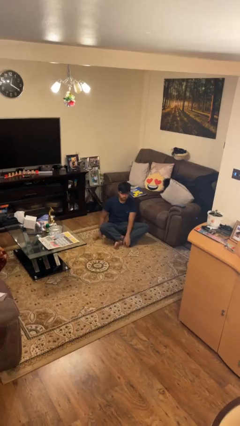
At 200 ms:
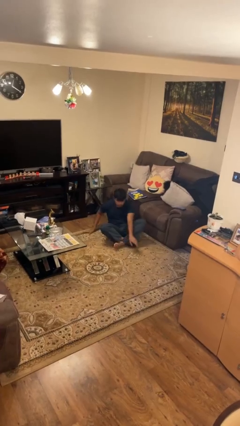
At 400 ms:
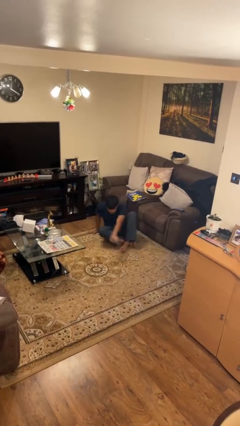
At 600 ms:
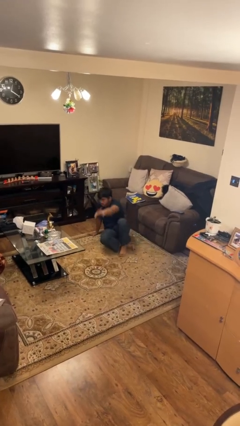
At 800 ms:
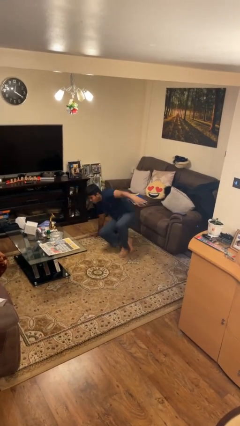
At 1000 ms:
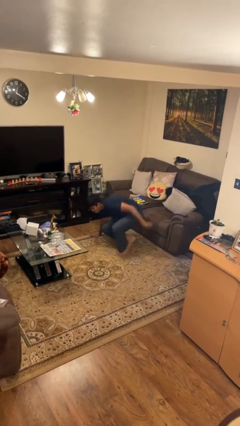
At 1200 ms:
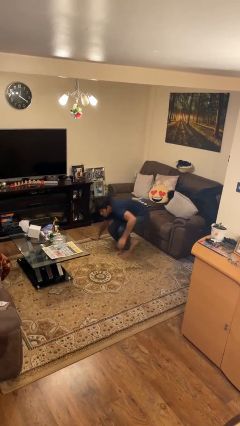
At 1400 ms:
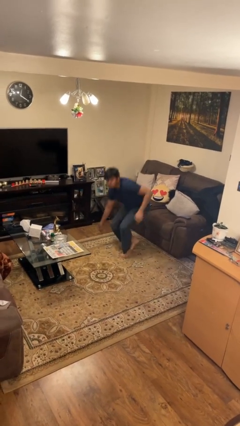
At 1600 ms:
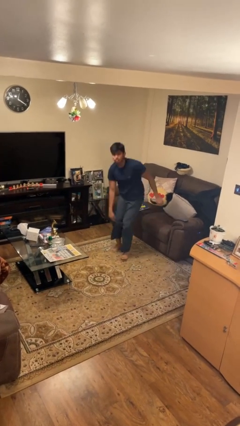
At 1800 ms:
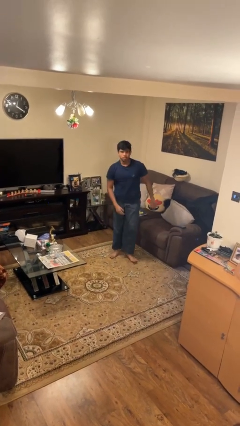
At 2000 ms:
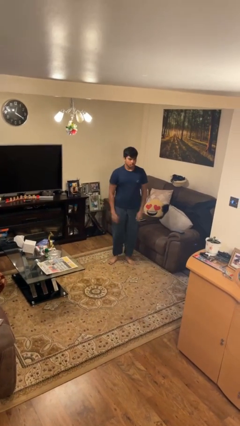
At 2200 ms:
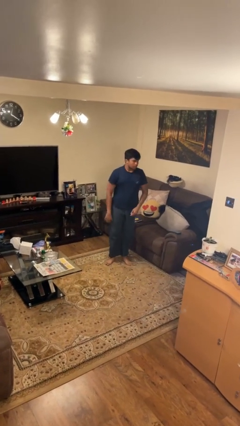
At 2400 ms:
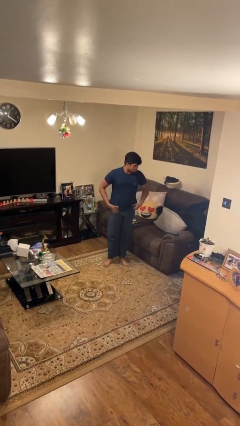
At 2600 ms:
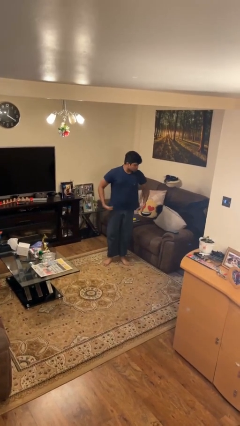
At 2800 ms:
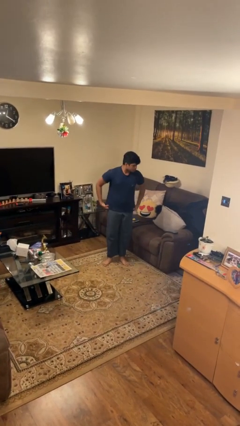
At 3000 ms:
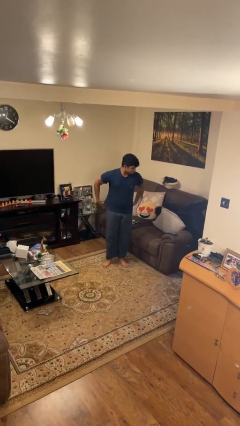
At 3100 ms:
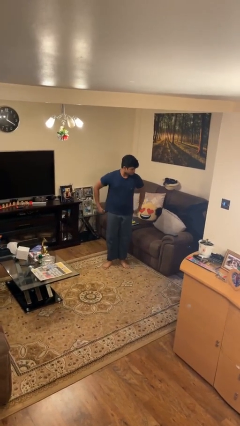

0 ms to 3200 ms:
person stands up from floor

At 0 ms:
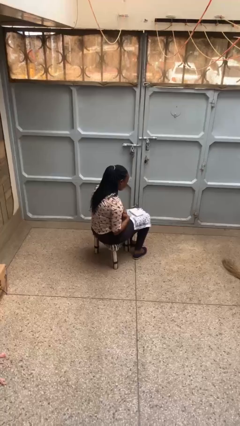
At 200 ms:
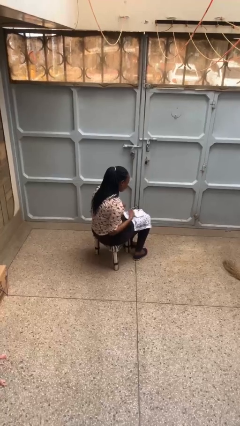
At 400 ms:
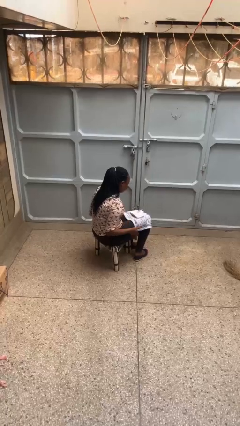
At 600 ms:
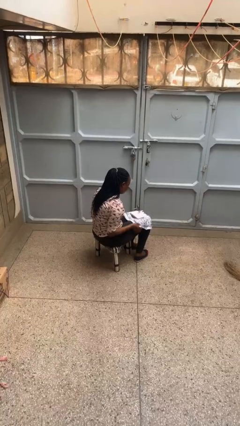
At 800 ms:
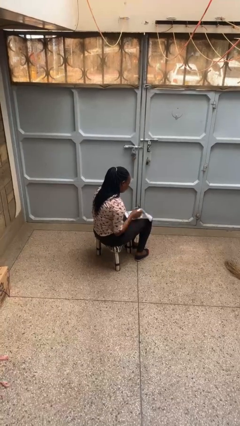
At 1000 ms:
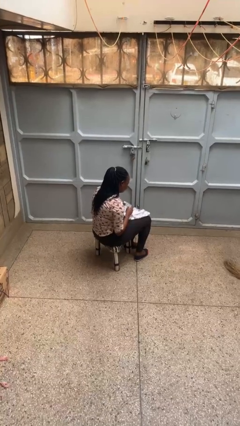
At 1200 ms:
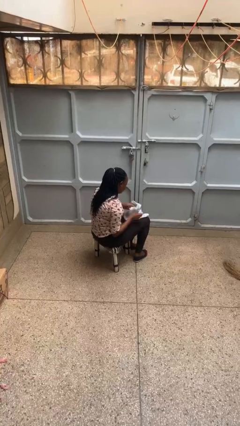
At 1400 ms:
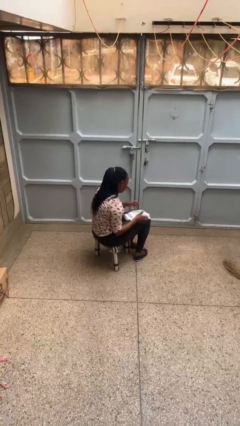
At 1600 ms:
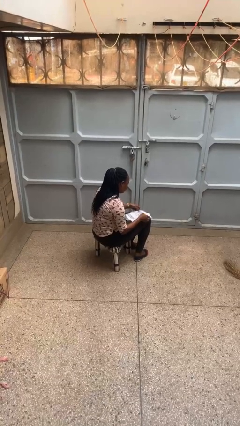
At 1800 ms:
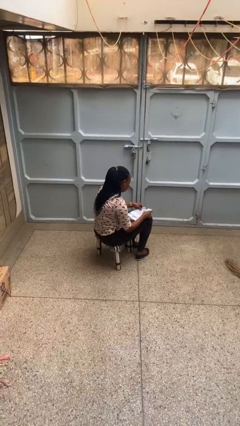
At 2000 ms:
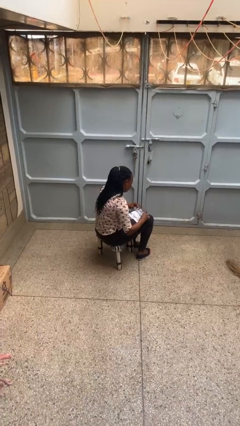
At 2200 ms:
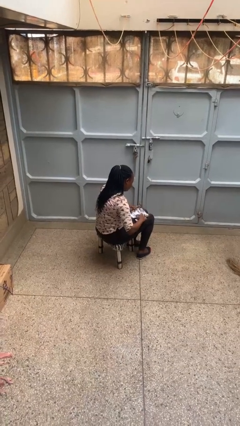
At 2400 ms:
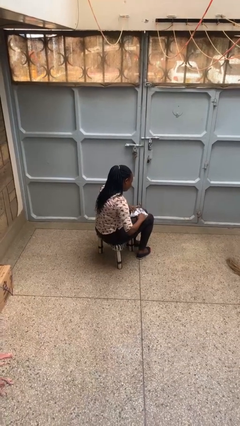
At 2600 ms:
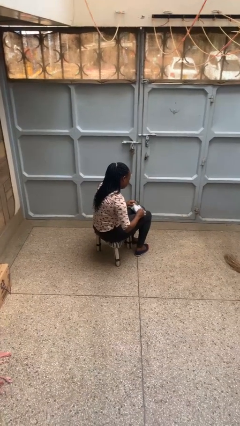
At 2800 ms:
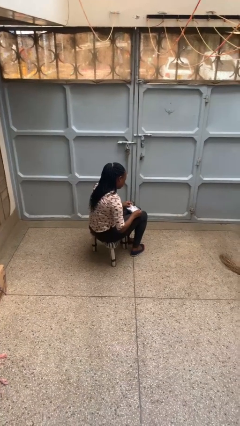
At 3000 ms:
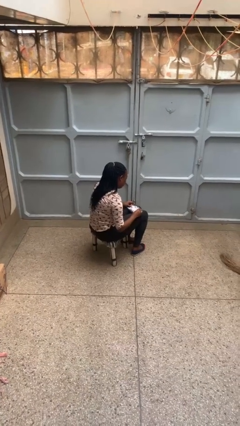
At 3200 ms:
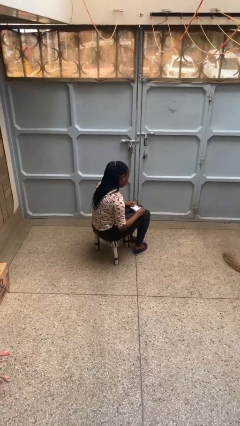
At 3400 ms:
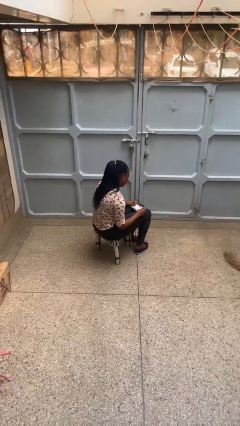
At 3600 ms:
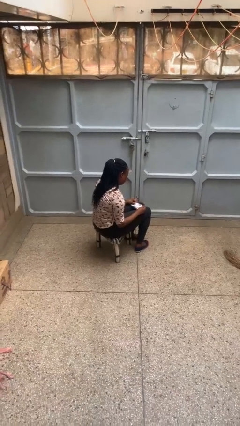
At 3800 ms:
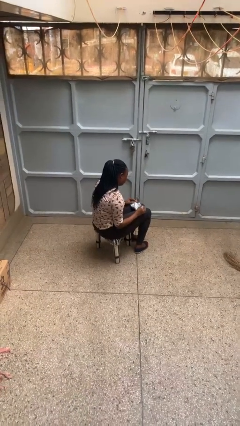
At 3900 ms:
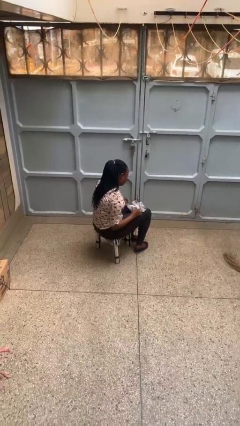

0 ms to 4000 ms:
person wraps box

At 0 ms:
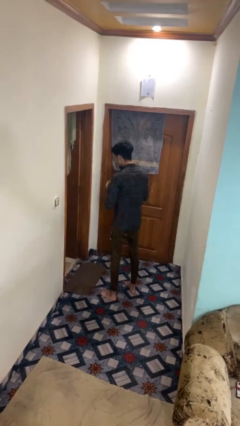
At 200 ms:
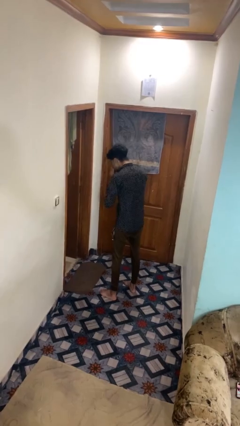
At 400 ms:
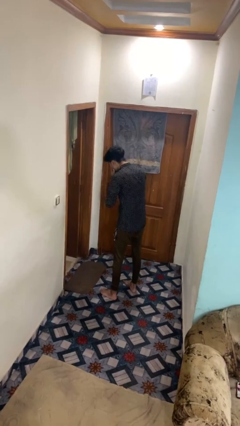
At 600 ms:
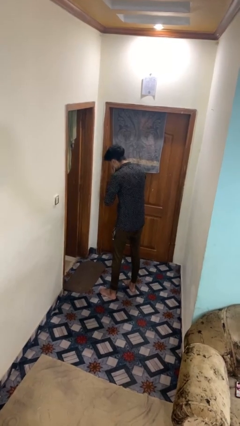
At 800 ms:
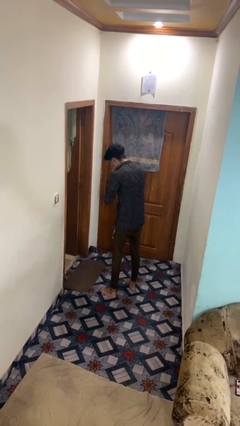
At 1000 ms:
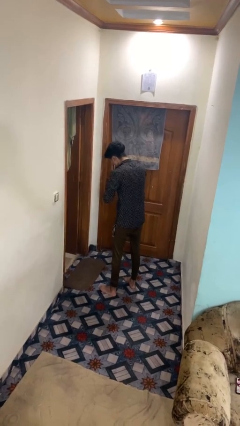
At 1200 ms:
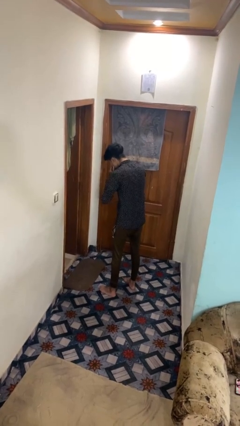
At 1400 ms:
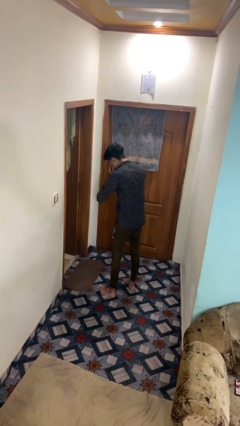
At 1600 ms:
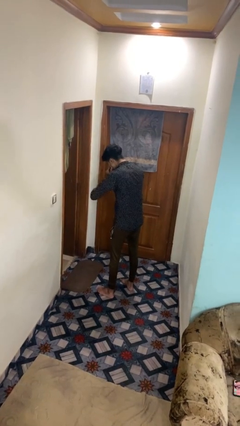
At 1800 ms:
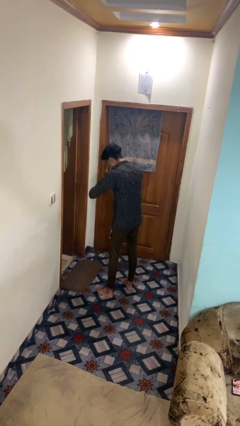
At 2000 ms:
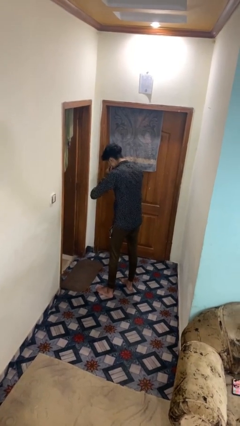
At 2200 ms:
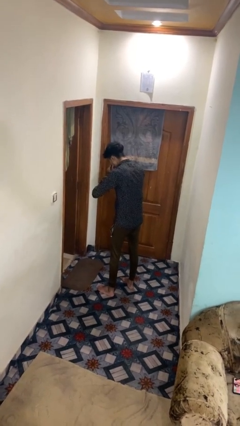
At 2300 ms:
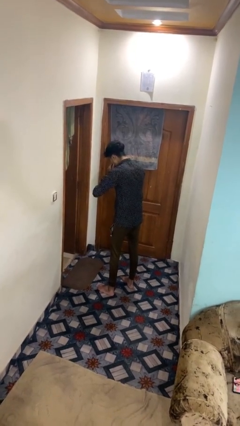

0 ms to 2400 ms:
person sneezes into hand

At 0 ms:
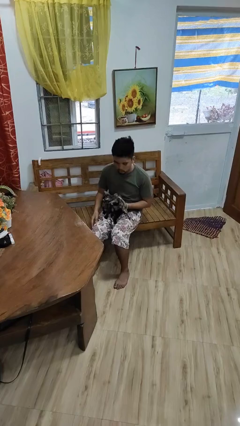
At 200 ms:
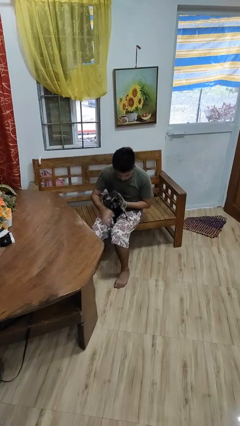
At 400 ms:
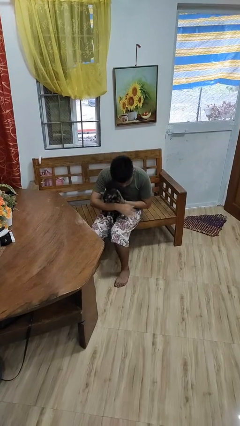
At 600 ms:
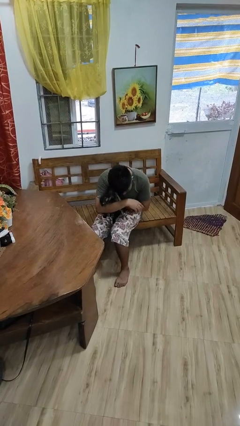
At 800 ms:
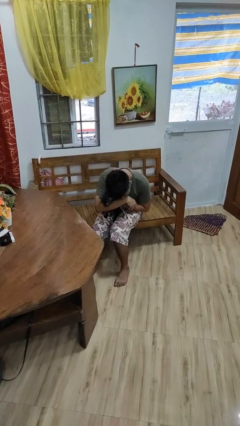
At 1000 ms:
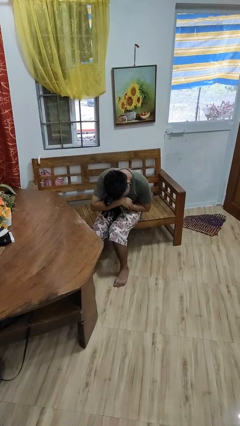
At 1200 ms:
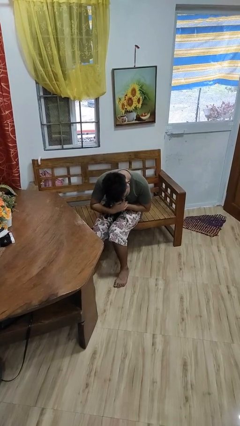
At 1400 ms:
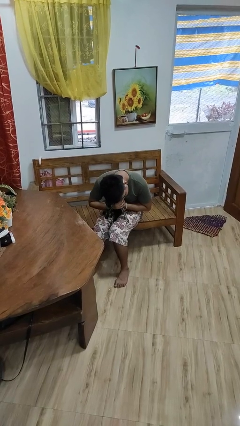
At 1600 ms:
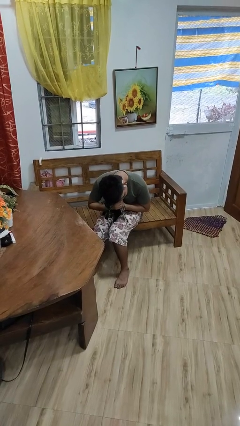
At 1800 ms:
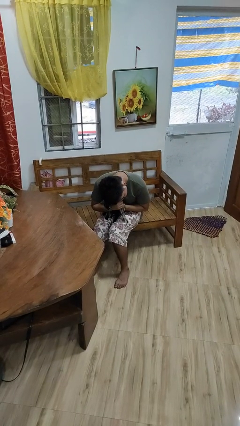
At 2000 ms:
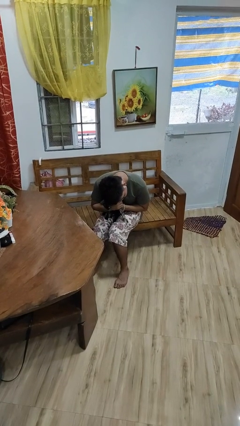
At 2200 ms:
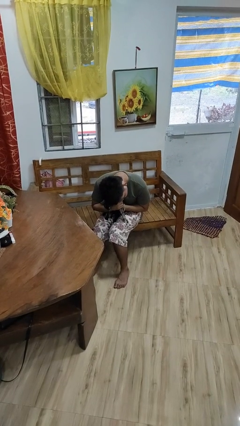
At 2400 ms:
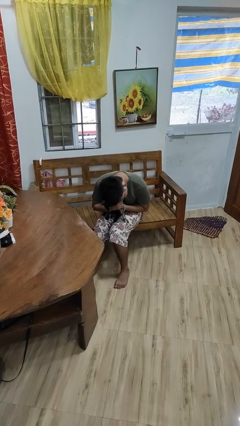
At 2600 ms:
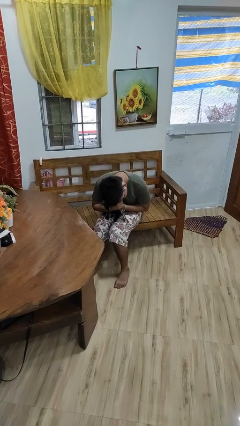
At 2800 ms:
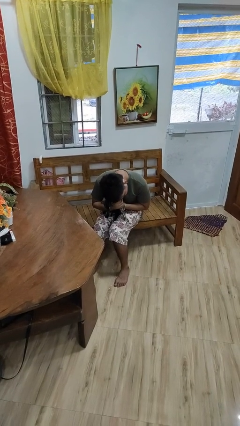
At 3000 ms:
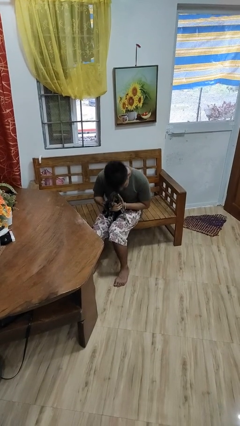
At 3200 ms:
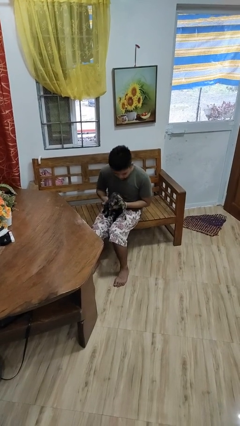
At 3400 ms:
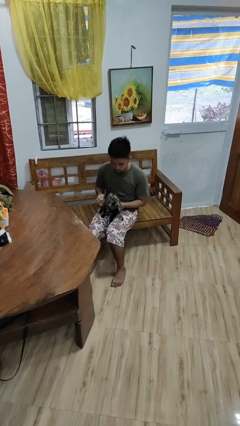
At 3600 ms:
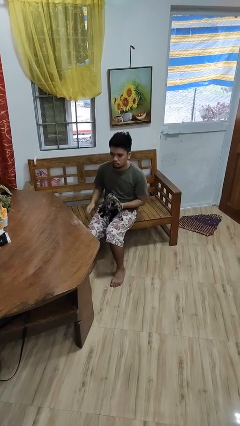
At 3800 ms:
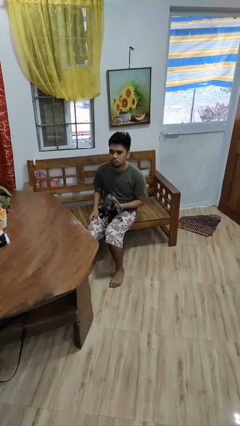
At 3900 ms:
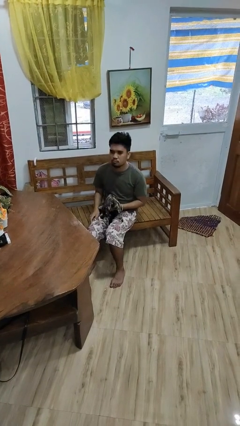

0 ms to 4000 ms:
person hugs cat

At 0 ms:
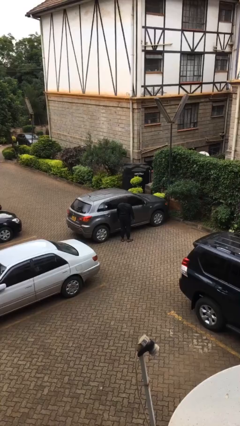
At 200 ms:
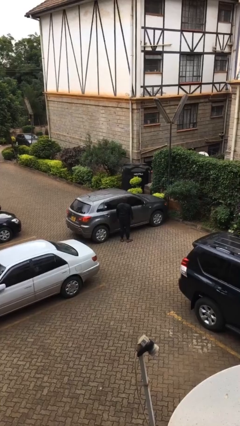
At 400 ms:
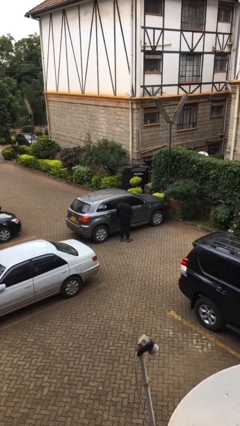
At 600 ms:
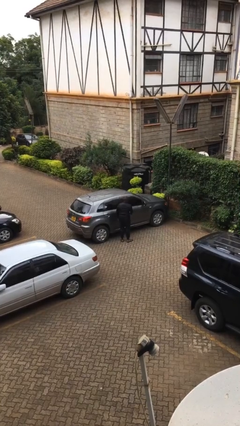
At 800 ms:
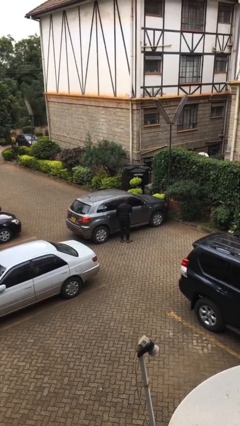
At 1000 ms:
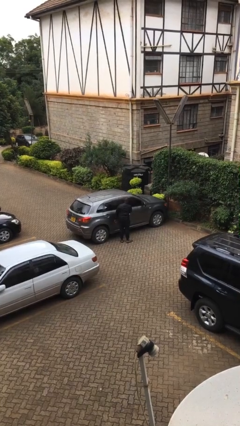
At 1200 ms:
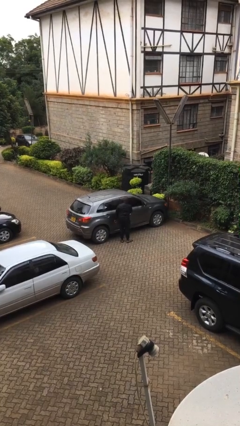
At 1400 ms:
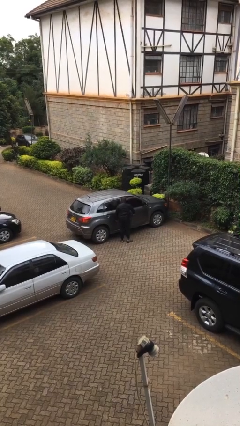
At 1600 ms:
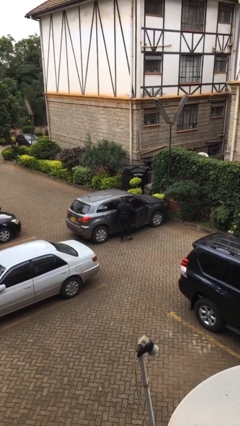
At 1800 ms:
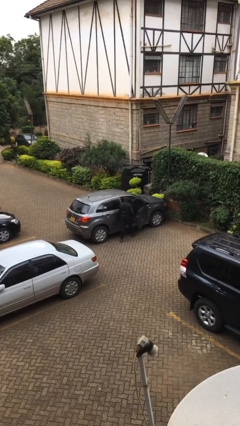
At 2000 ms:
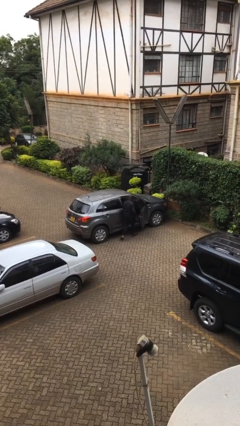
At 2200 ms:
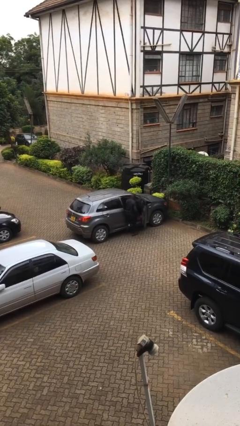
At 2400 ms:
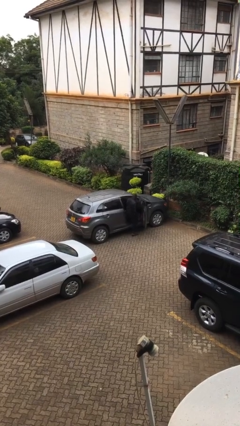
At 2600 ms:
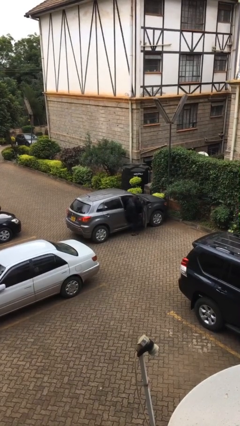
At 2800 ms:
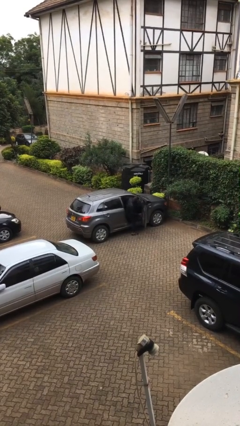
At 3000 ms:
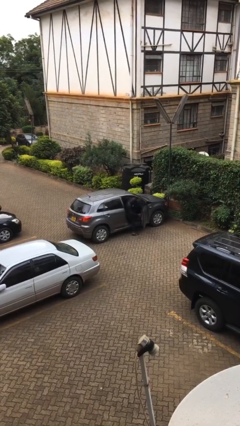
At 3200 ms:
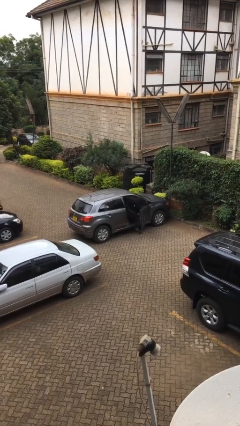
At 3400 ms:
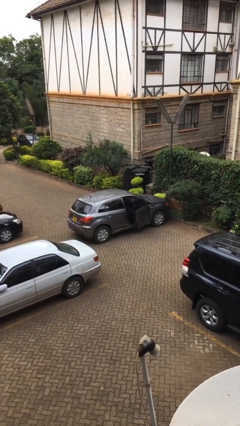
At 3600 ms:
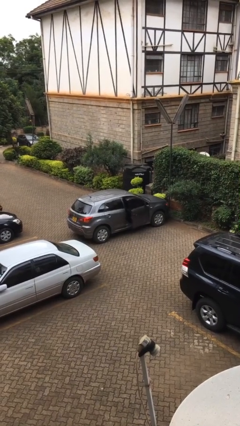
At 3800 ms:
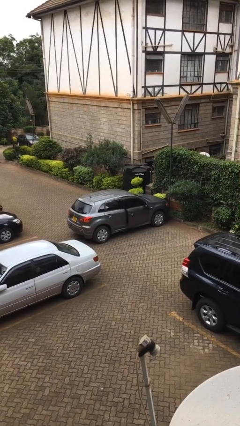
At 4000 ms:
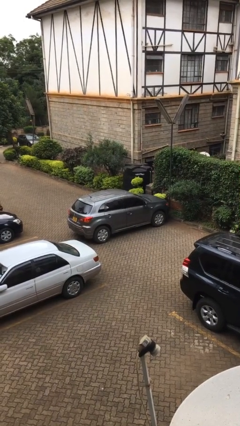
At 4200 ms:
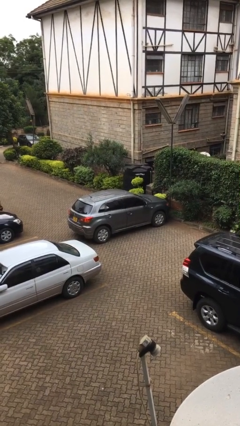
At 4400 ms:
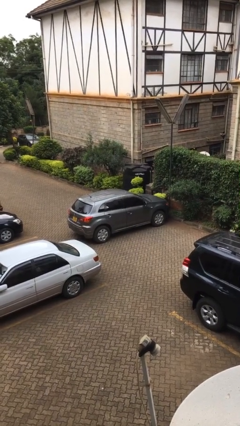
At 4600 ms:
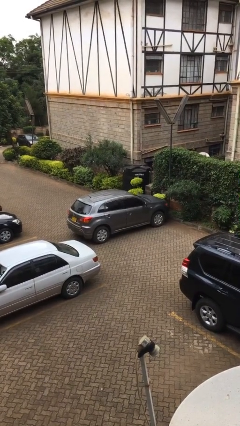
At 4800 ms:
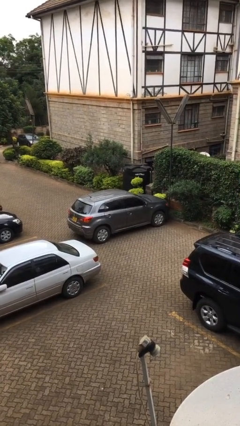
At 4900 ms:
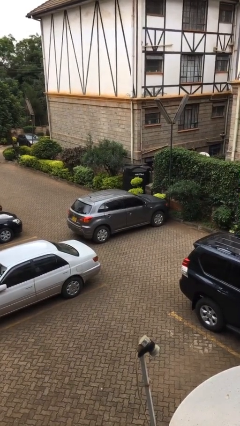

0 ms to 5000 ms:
car picks up person
